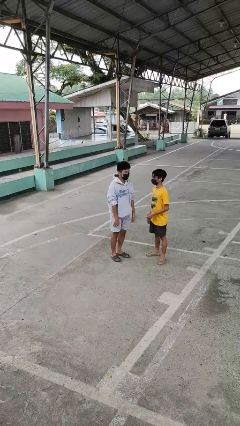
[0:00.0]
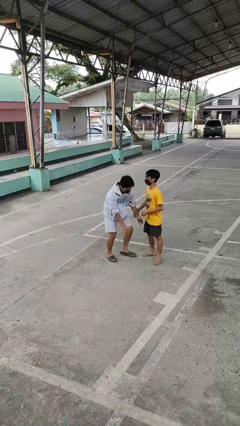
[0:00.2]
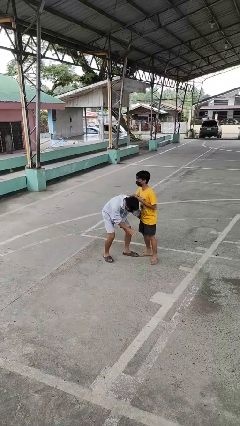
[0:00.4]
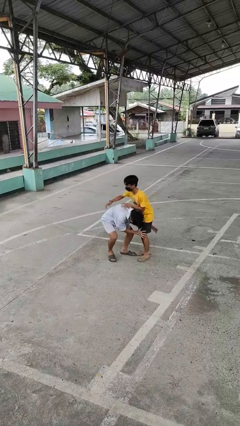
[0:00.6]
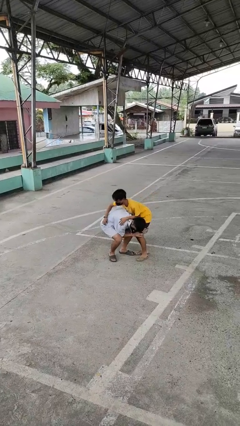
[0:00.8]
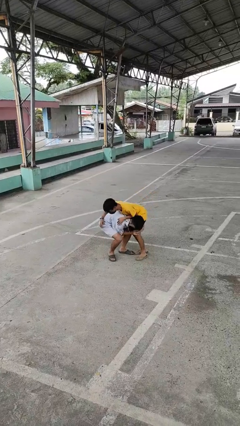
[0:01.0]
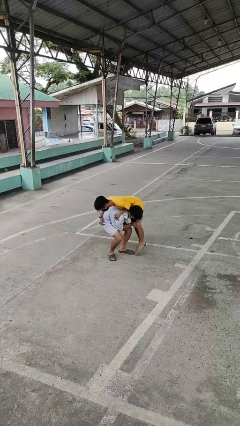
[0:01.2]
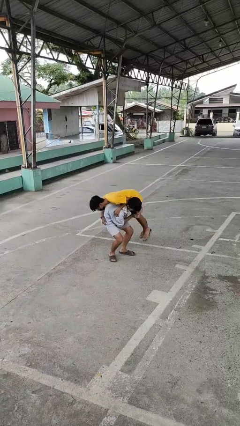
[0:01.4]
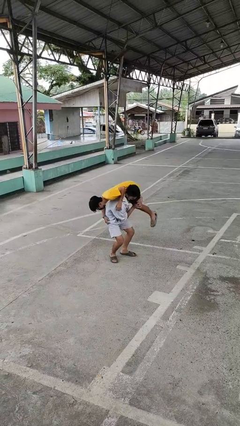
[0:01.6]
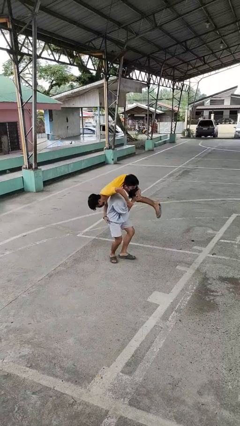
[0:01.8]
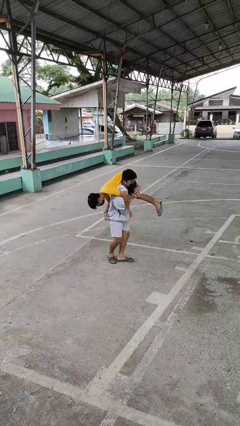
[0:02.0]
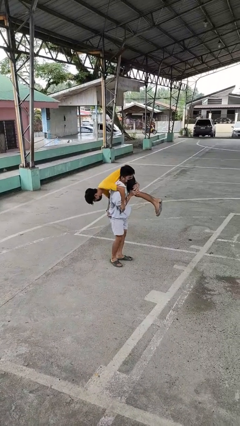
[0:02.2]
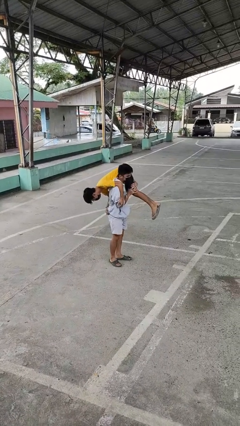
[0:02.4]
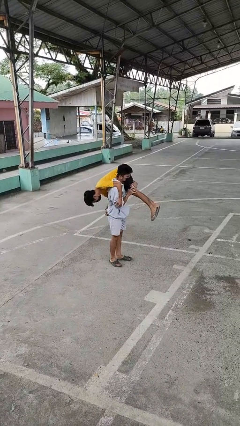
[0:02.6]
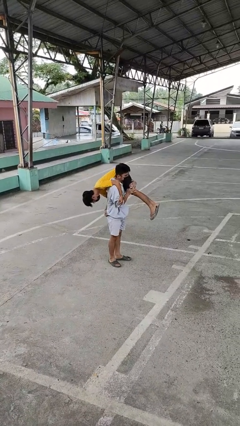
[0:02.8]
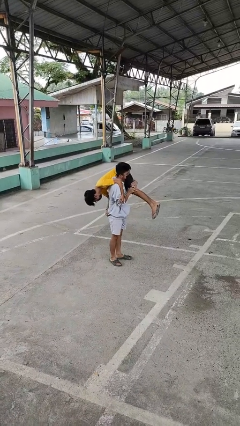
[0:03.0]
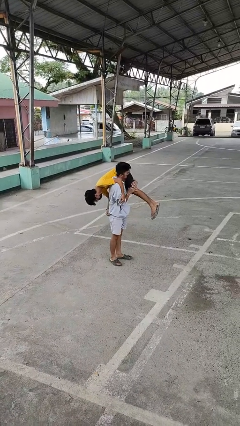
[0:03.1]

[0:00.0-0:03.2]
person carries person over shoulder

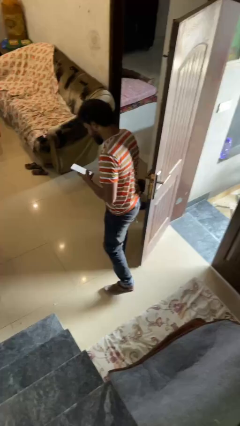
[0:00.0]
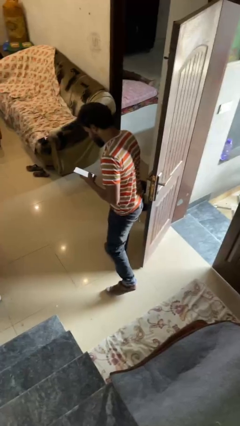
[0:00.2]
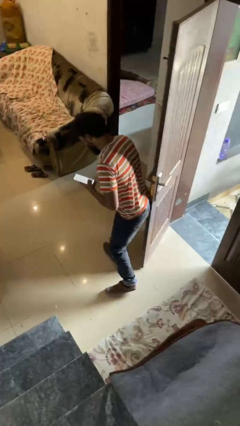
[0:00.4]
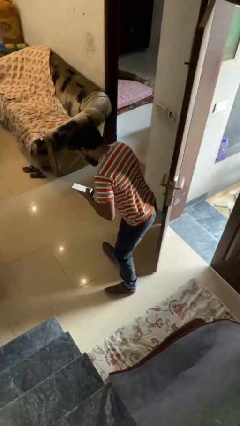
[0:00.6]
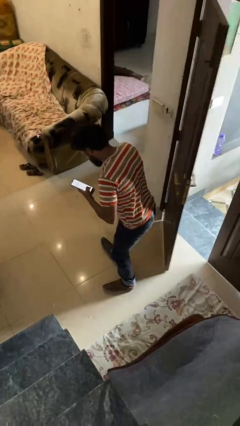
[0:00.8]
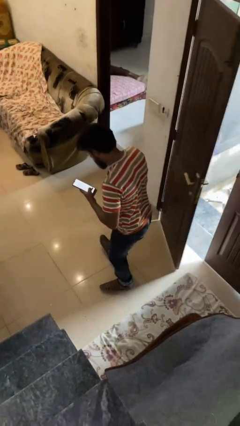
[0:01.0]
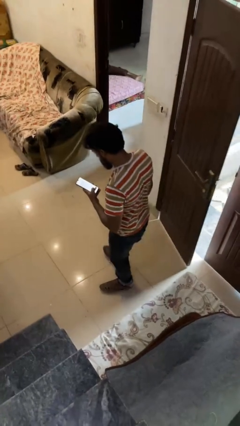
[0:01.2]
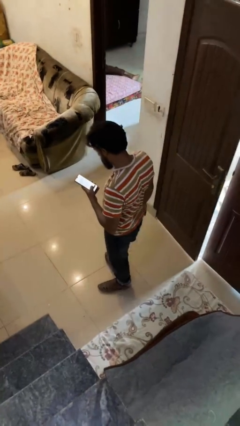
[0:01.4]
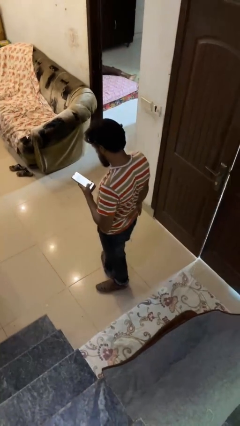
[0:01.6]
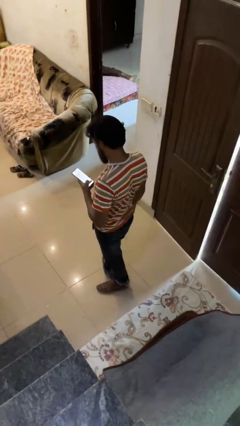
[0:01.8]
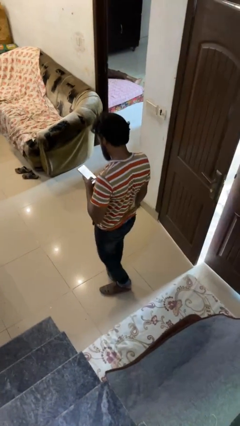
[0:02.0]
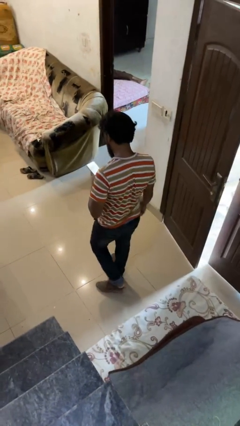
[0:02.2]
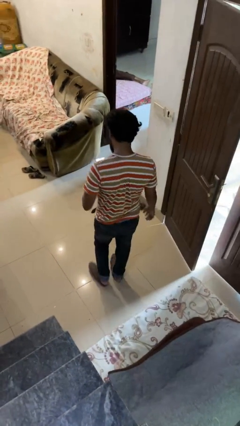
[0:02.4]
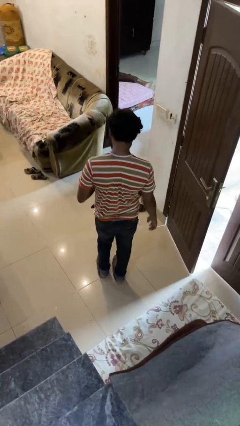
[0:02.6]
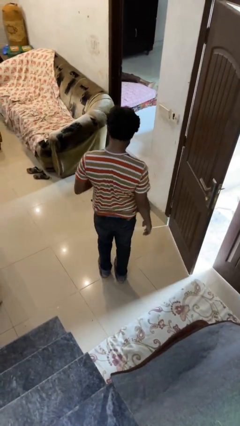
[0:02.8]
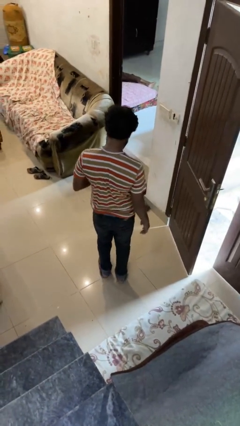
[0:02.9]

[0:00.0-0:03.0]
person closes door with hip

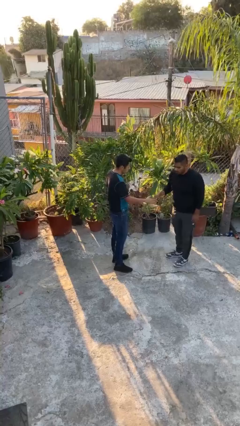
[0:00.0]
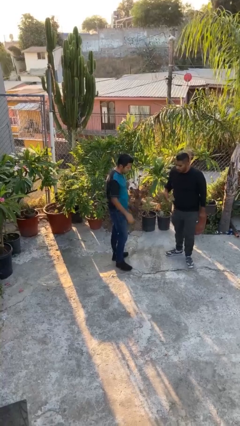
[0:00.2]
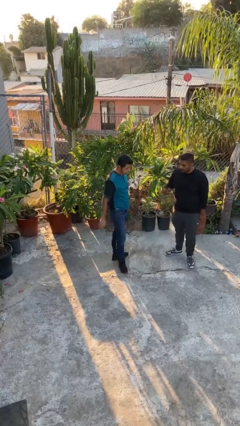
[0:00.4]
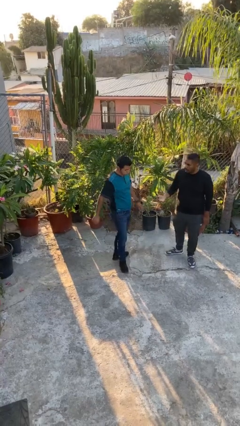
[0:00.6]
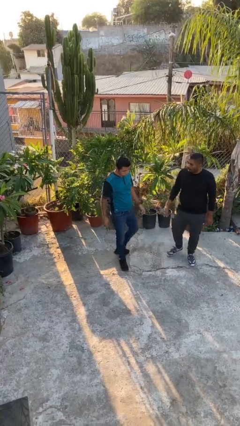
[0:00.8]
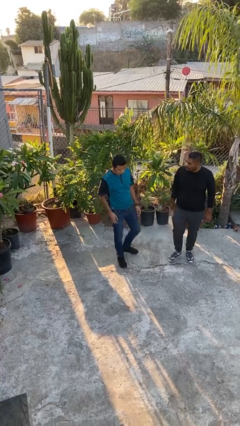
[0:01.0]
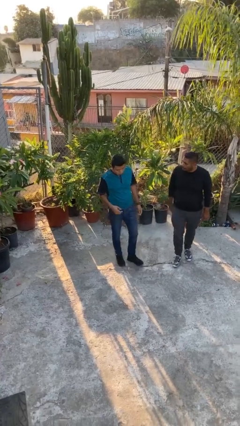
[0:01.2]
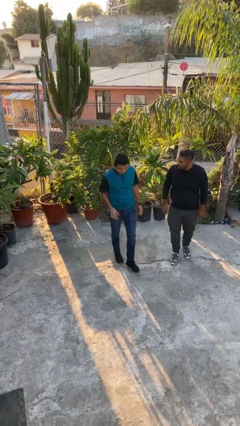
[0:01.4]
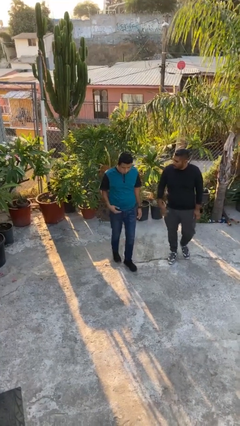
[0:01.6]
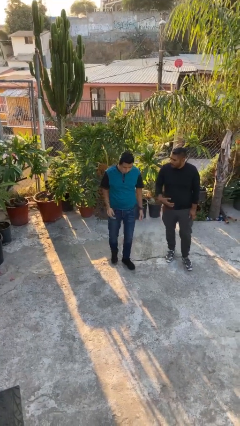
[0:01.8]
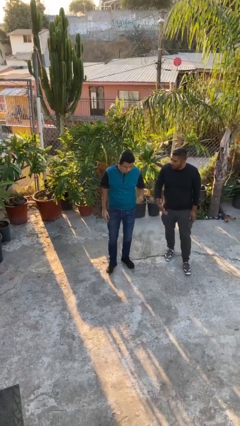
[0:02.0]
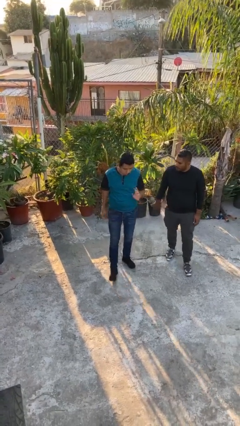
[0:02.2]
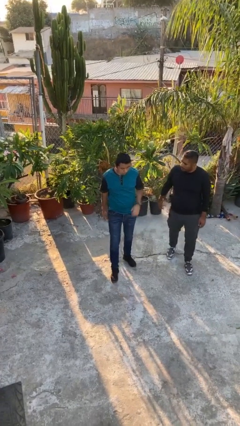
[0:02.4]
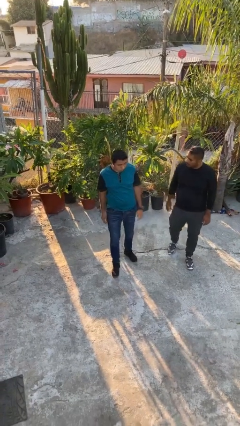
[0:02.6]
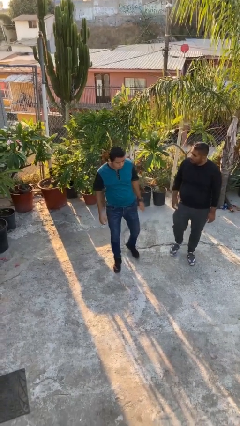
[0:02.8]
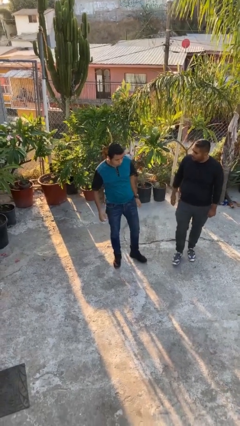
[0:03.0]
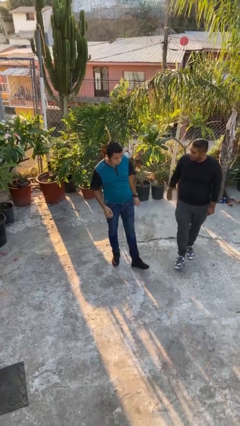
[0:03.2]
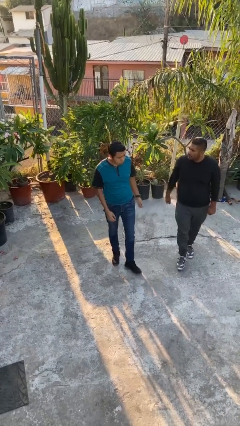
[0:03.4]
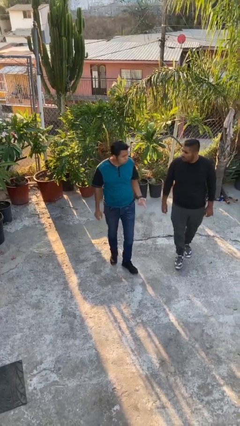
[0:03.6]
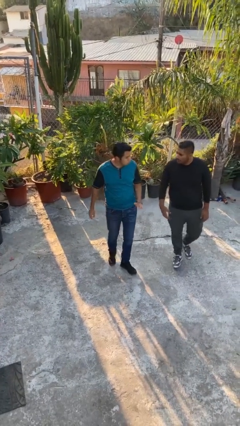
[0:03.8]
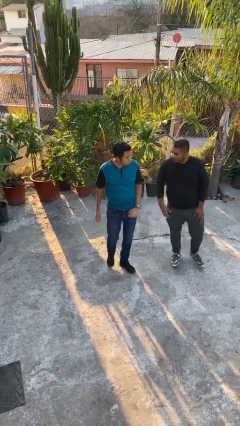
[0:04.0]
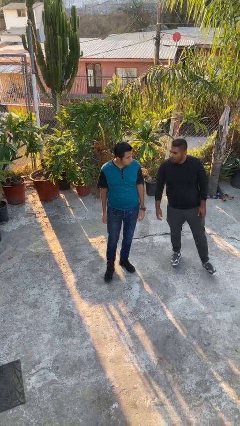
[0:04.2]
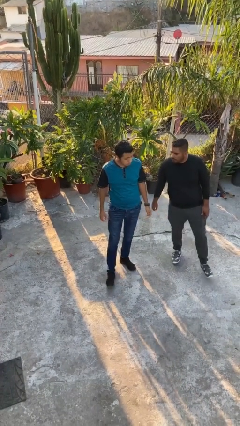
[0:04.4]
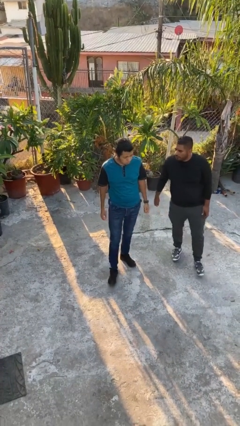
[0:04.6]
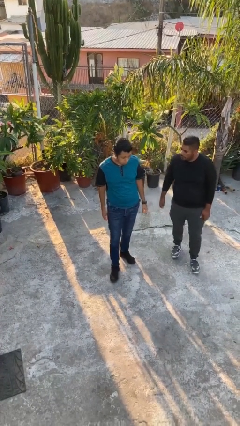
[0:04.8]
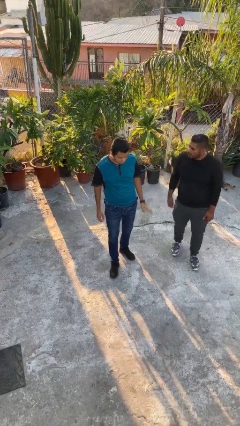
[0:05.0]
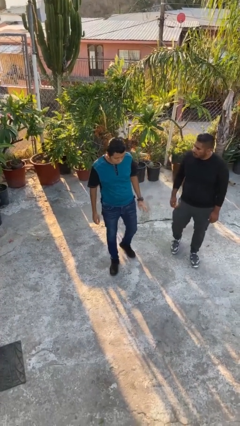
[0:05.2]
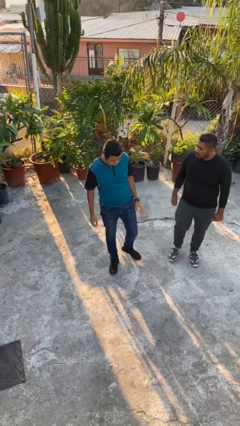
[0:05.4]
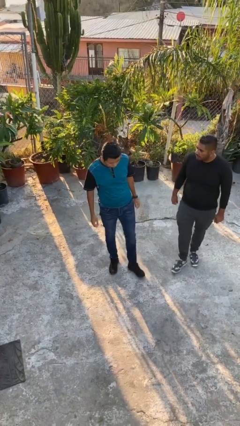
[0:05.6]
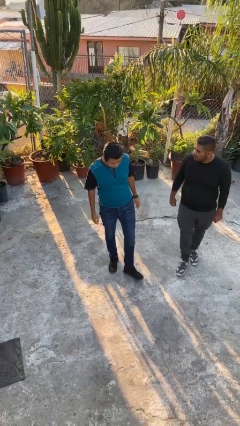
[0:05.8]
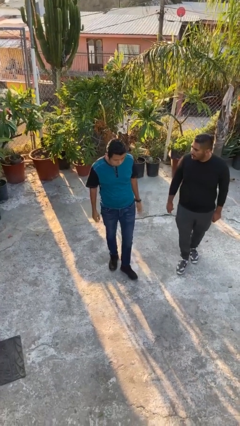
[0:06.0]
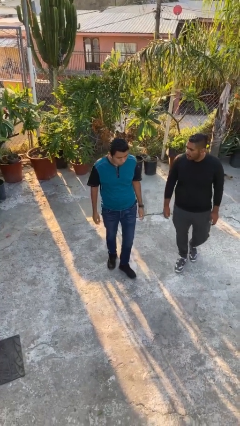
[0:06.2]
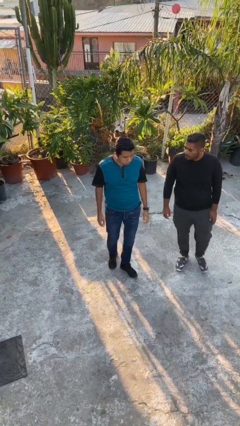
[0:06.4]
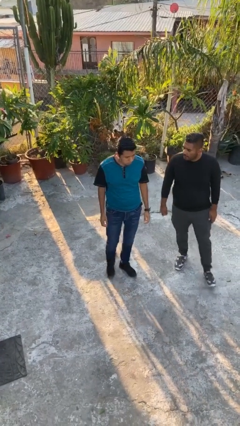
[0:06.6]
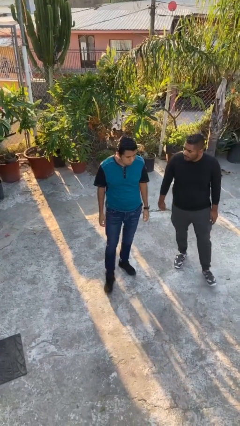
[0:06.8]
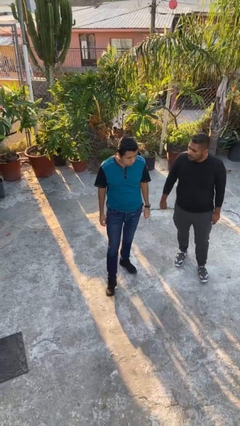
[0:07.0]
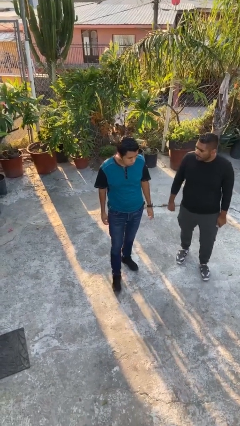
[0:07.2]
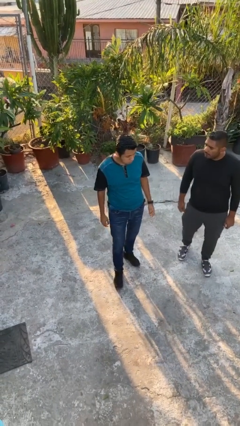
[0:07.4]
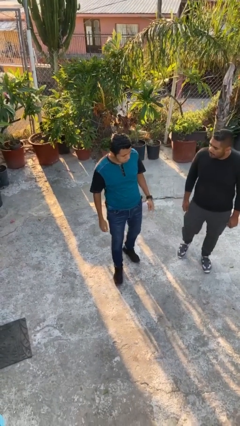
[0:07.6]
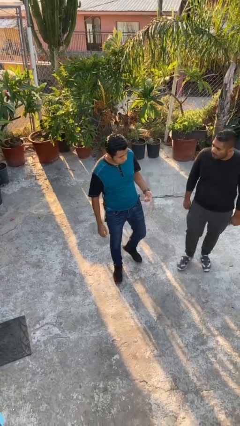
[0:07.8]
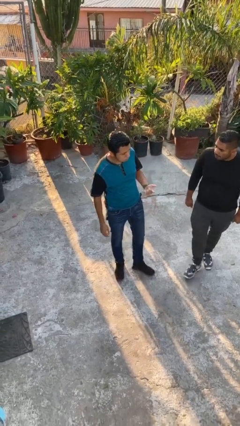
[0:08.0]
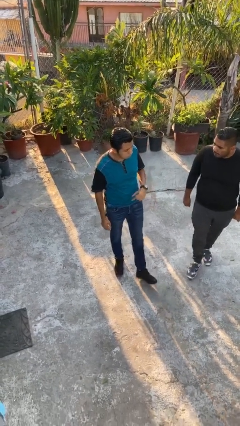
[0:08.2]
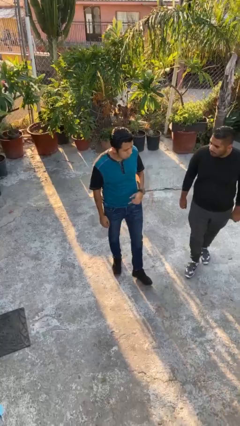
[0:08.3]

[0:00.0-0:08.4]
person talks to person

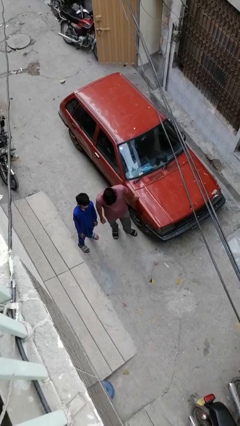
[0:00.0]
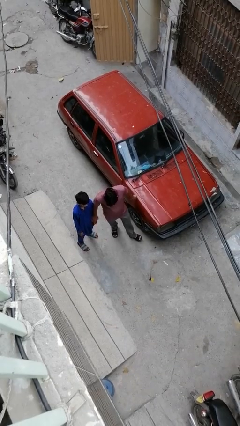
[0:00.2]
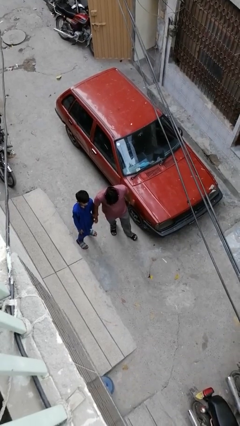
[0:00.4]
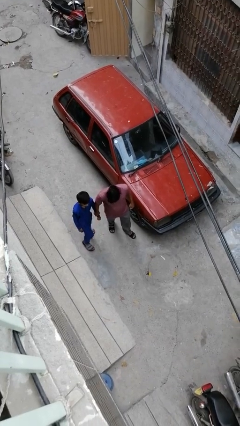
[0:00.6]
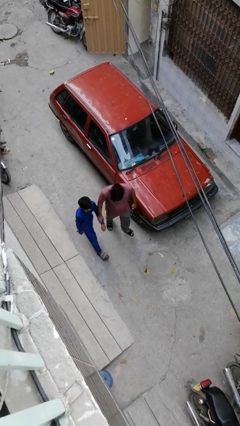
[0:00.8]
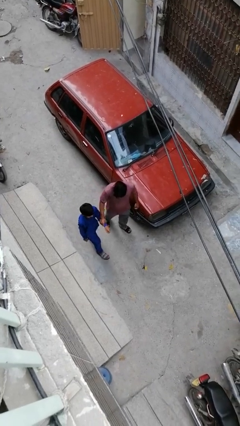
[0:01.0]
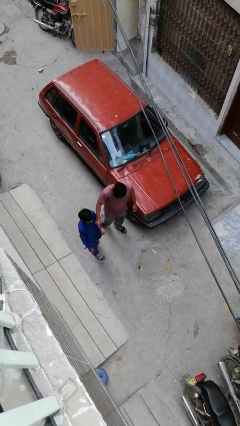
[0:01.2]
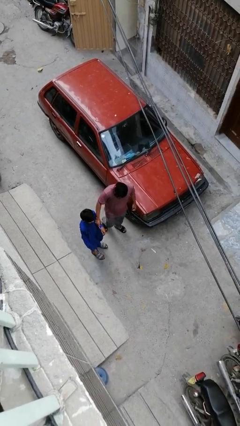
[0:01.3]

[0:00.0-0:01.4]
person grabs person by forearm

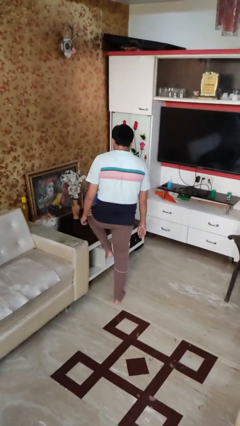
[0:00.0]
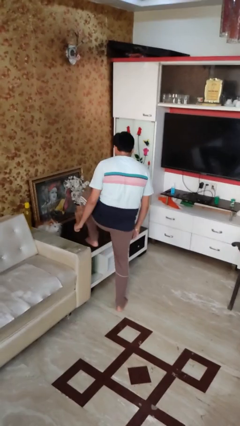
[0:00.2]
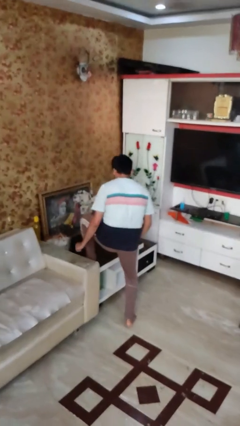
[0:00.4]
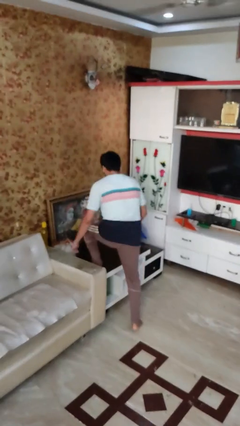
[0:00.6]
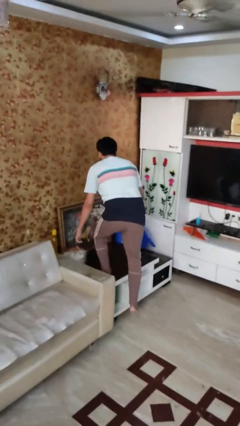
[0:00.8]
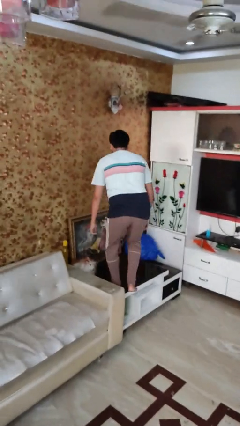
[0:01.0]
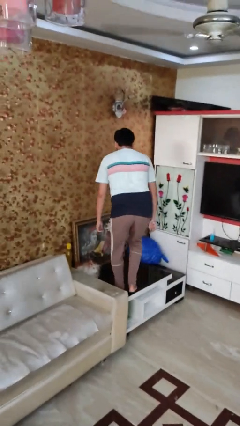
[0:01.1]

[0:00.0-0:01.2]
person climbs on table

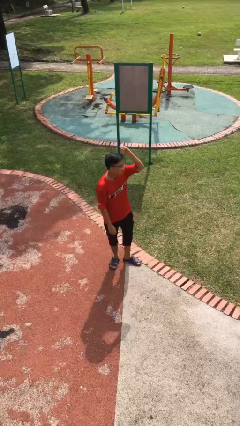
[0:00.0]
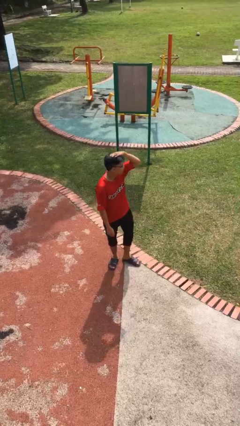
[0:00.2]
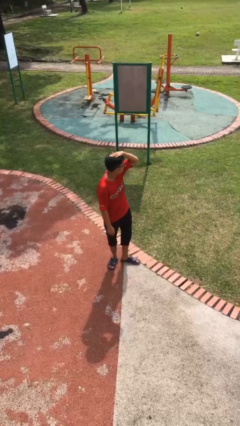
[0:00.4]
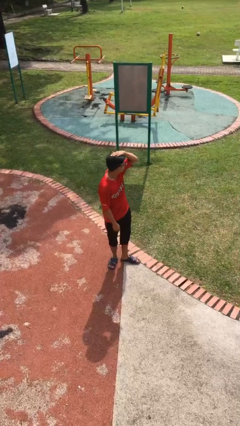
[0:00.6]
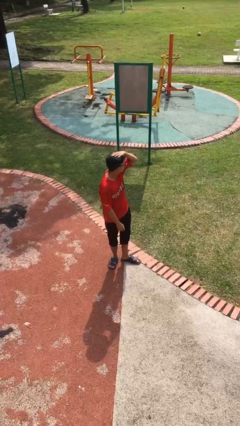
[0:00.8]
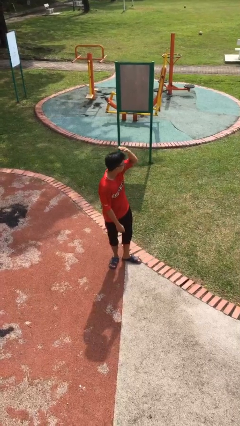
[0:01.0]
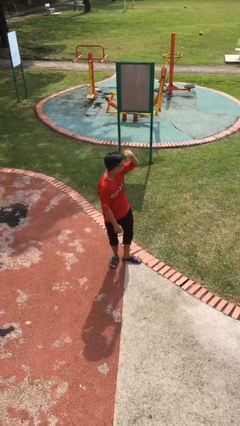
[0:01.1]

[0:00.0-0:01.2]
person pats head
